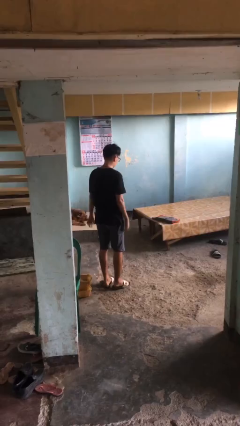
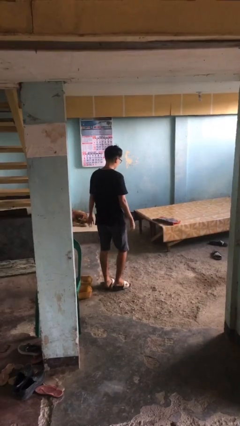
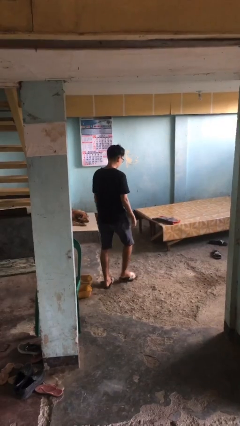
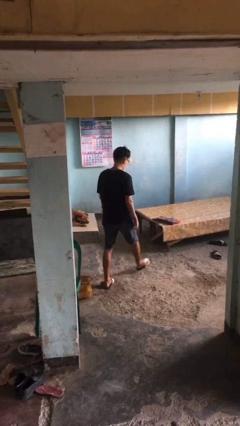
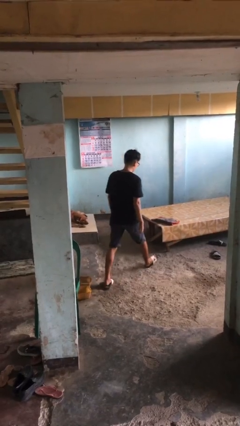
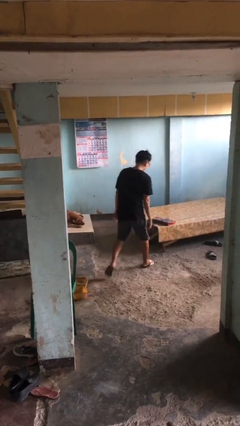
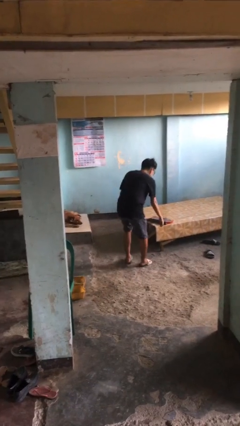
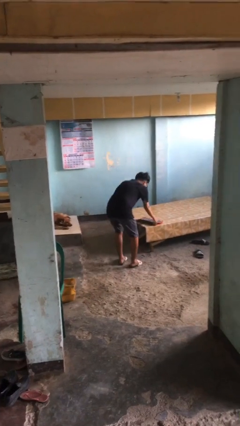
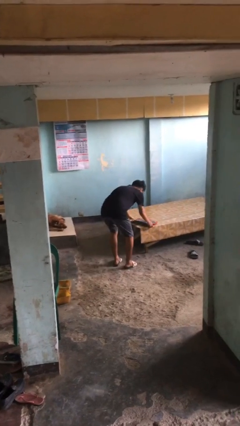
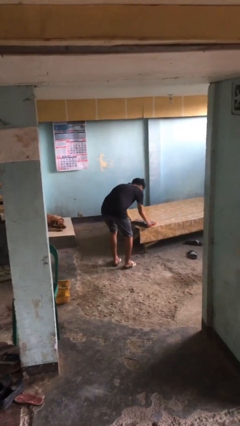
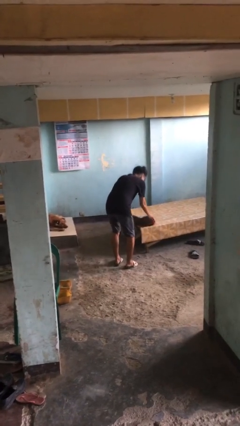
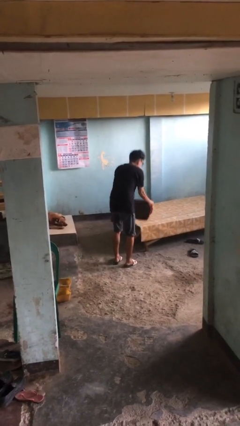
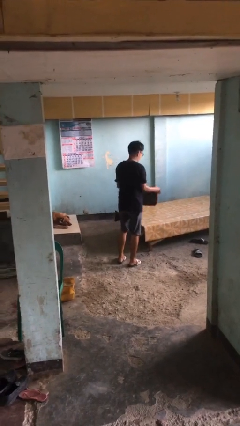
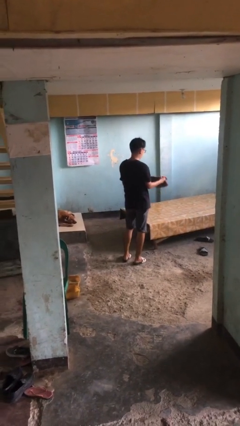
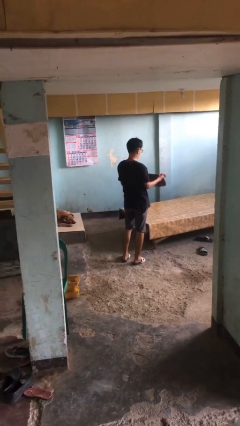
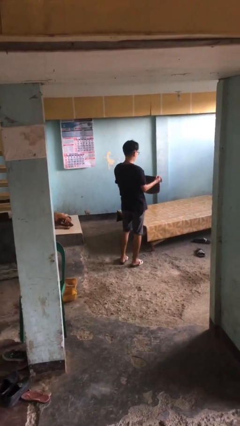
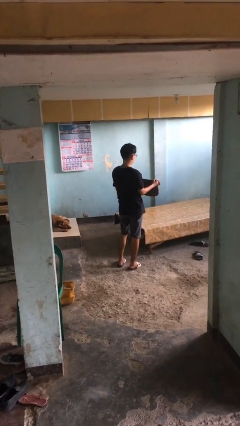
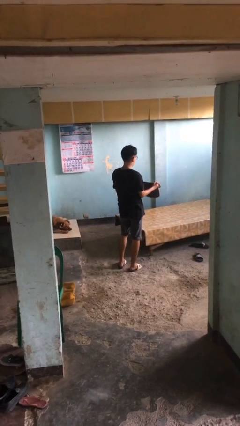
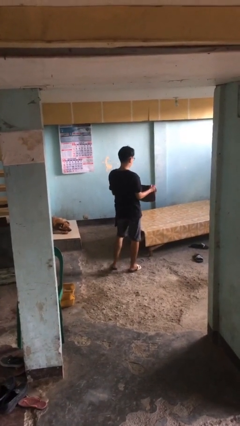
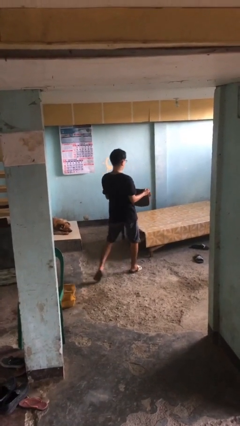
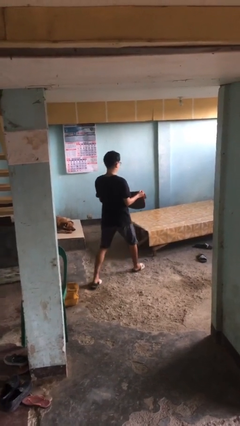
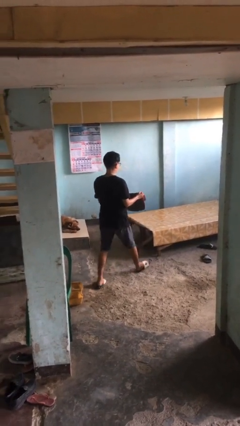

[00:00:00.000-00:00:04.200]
person picks up object from bed

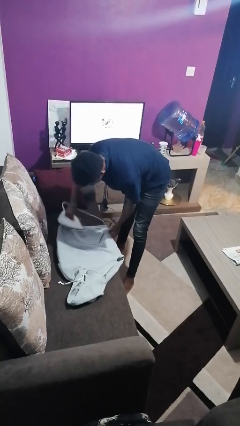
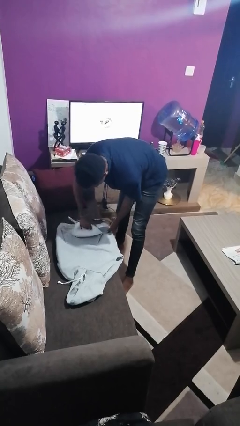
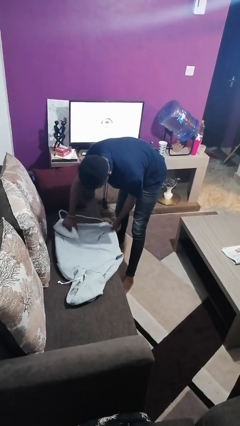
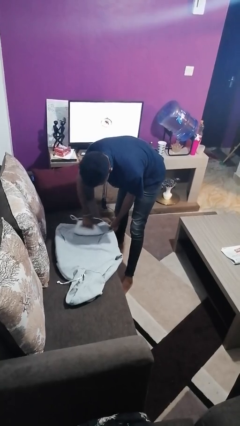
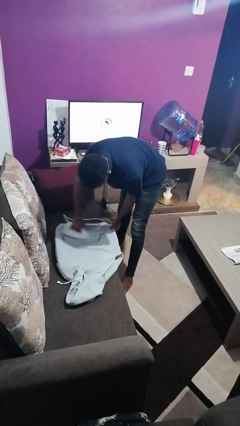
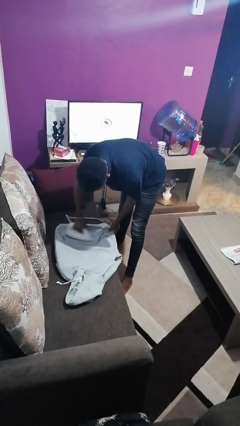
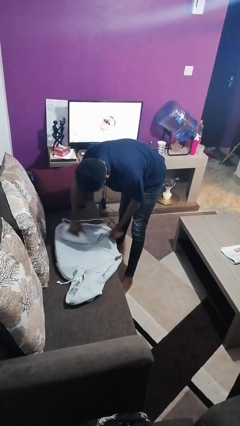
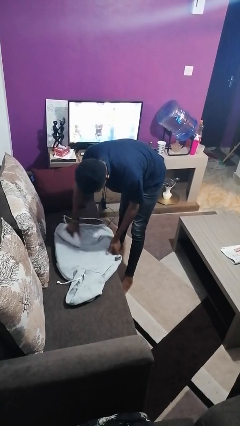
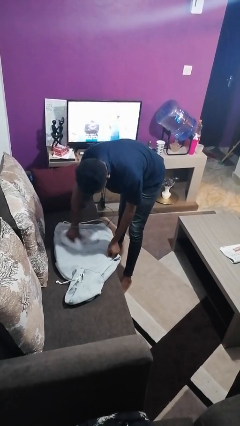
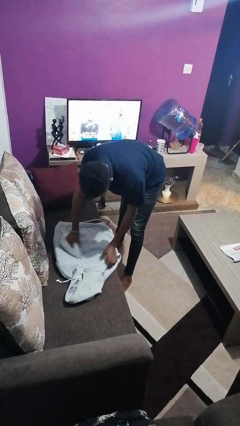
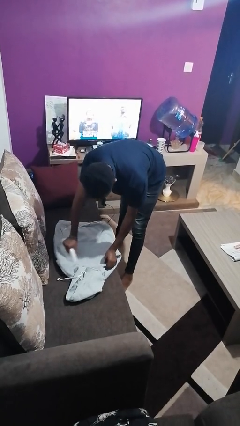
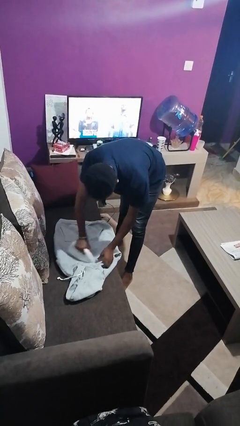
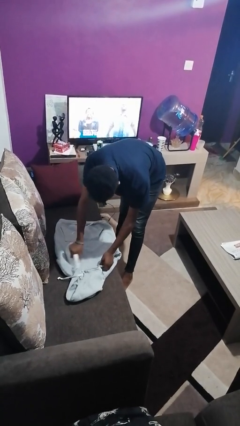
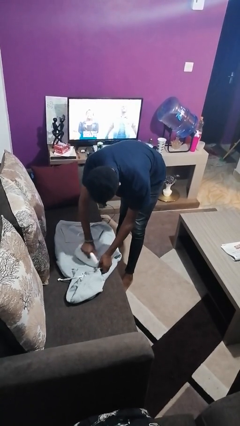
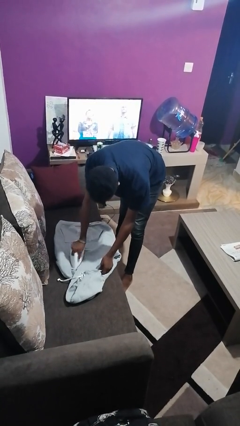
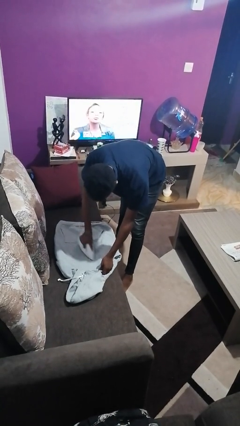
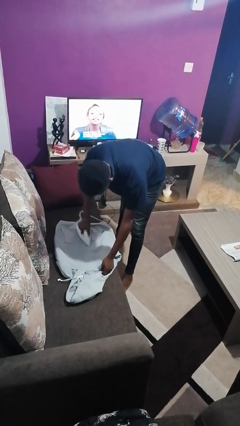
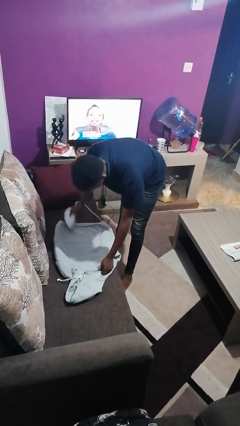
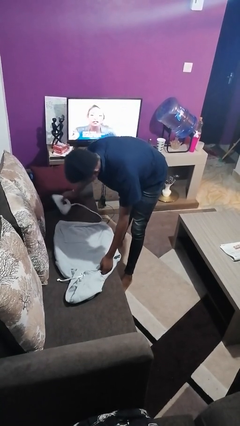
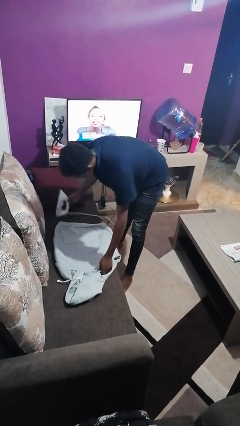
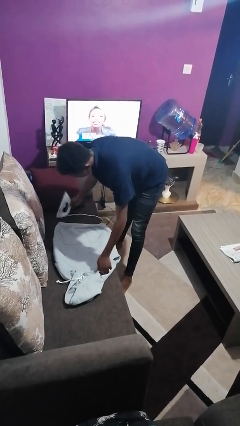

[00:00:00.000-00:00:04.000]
person irons clothes

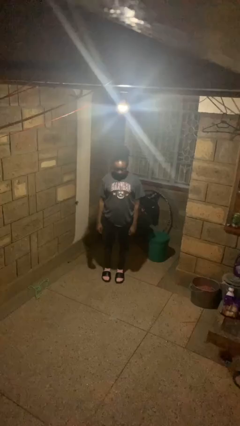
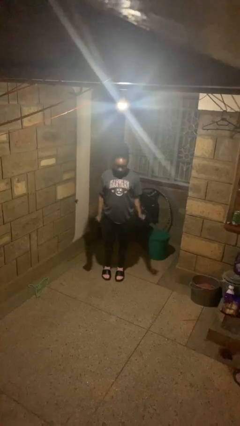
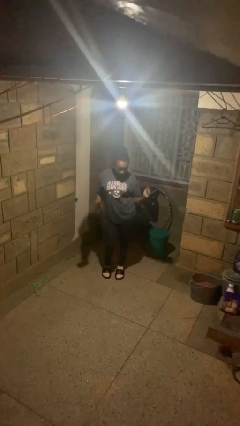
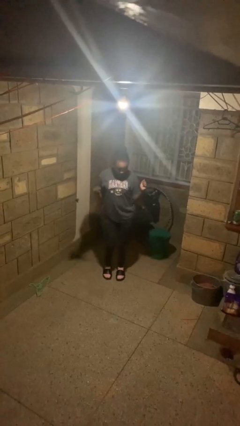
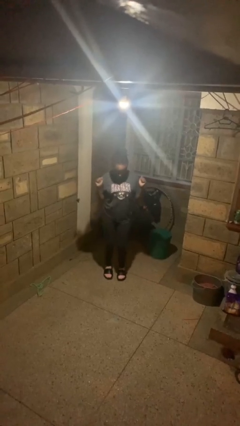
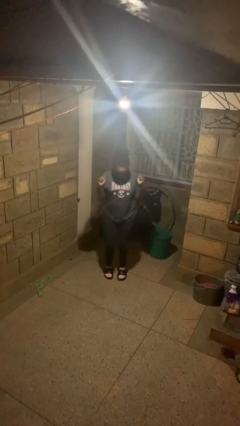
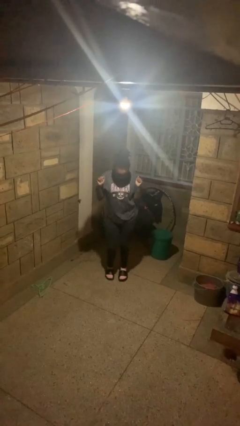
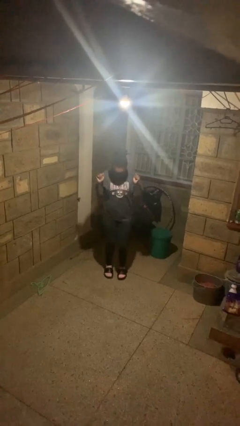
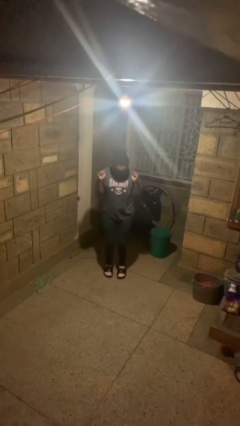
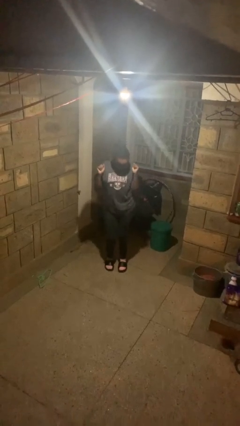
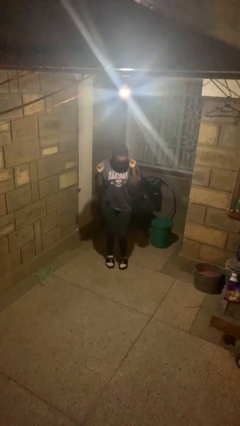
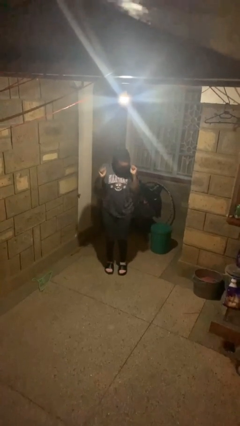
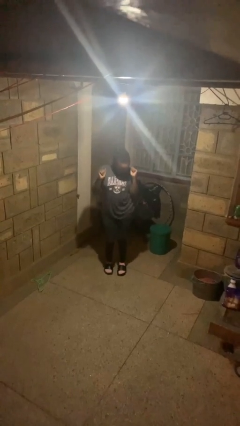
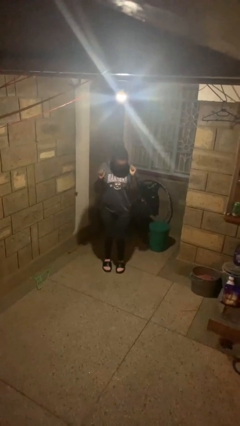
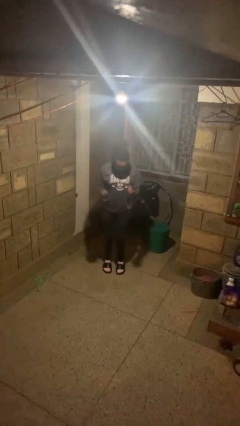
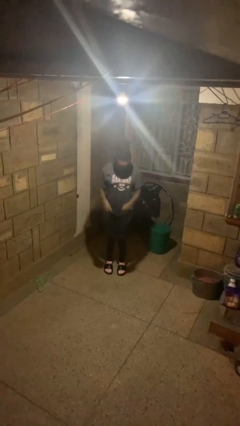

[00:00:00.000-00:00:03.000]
person wiggles hips

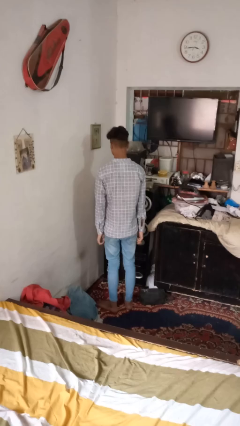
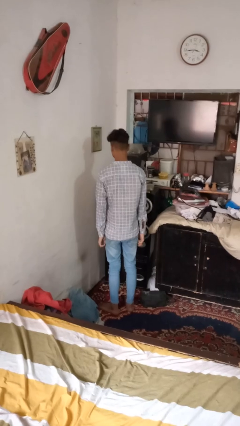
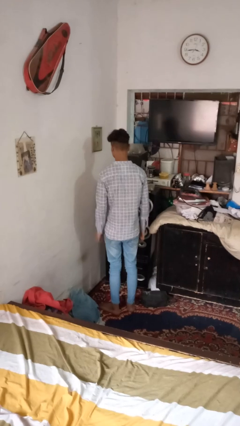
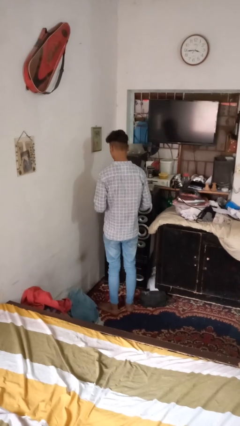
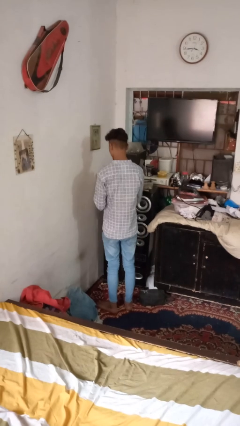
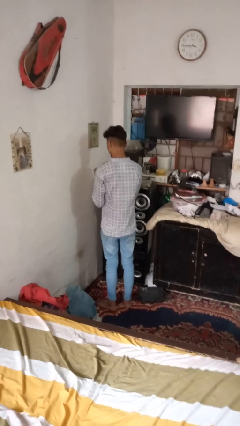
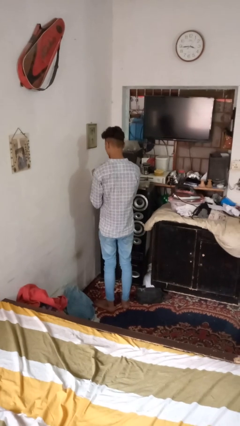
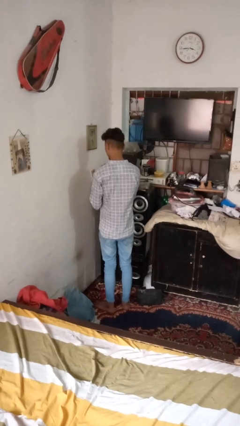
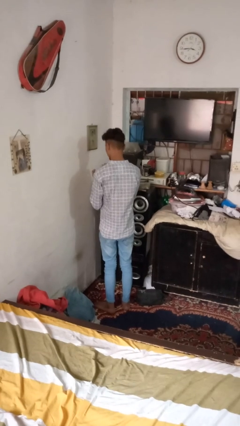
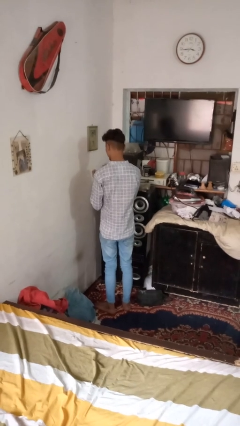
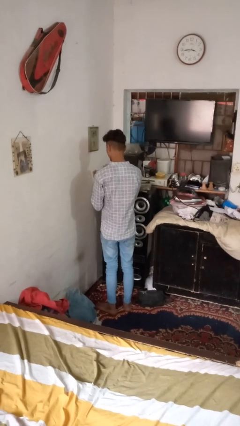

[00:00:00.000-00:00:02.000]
person clips fingernails

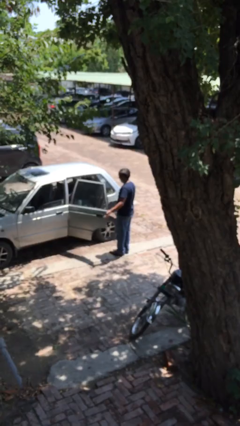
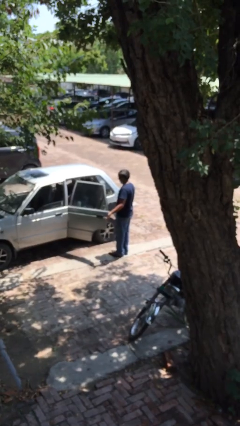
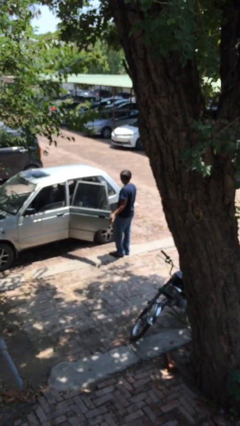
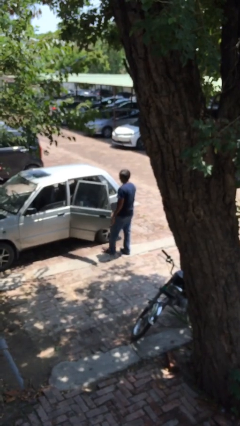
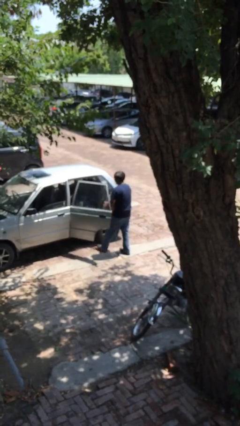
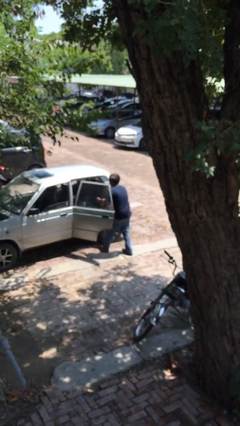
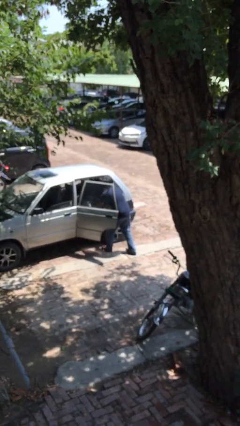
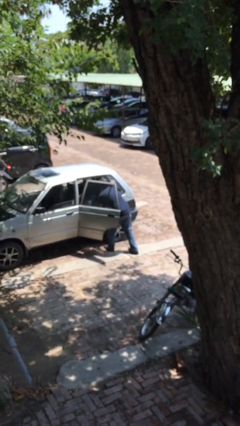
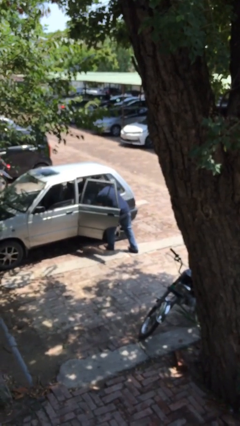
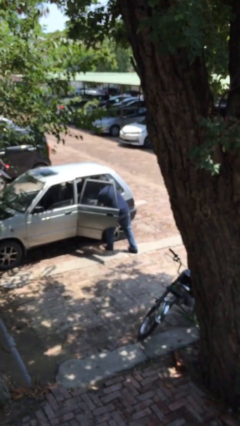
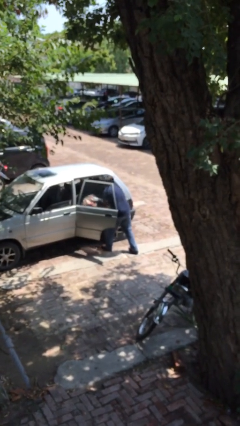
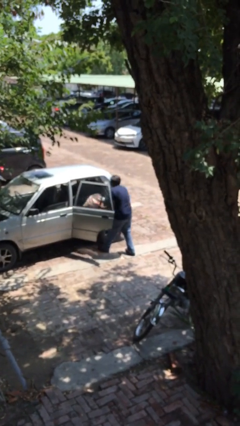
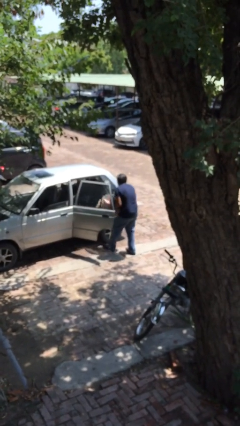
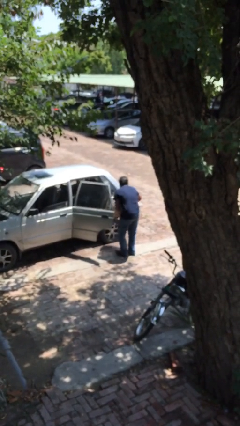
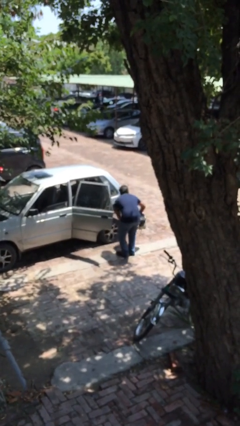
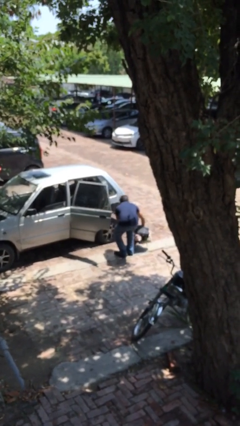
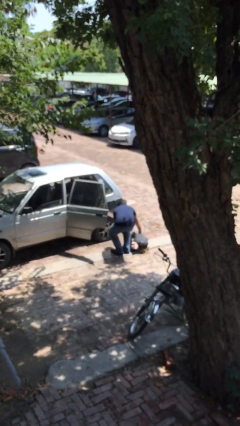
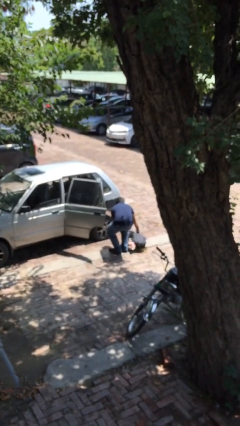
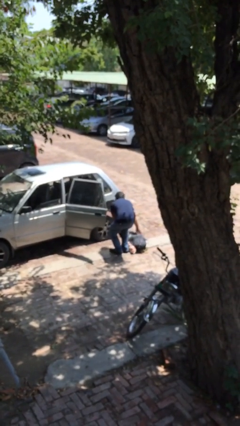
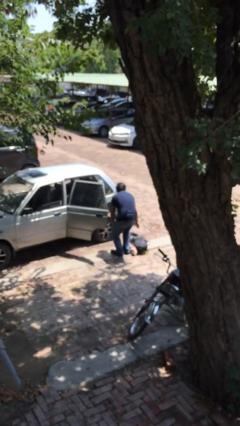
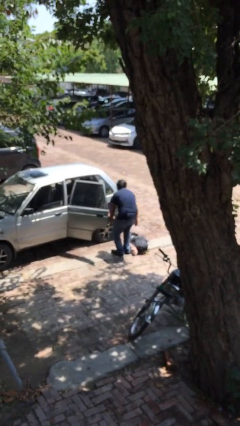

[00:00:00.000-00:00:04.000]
person unloads car

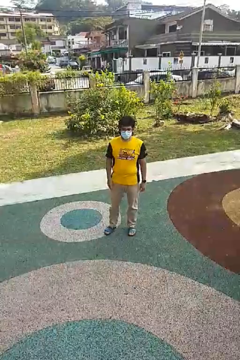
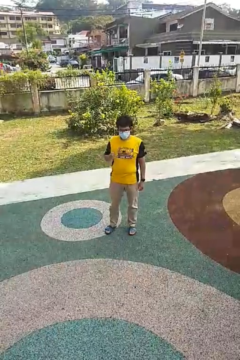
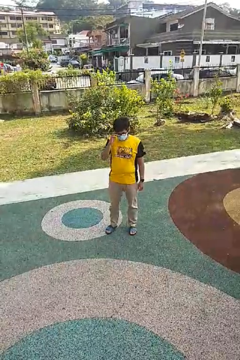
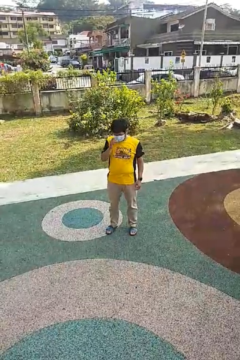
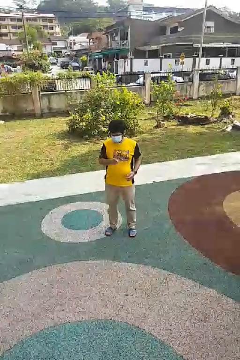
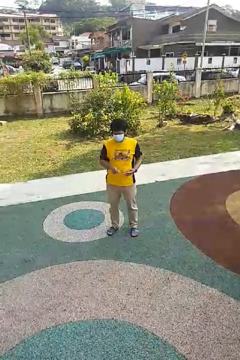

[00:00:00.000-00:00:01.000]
person takes off glasses
